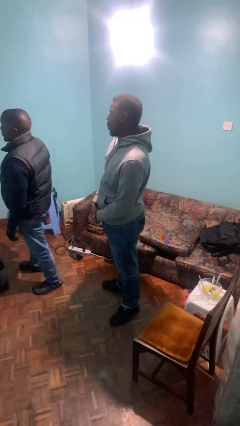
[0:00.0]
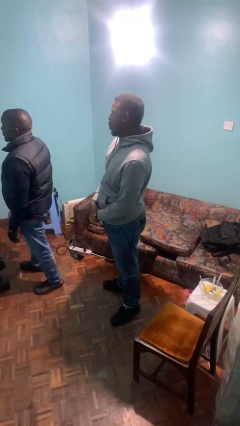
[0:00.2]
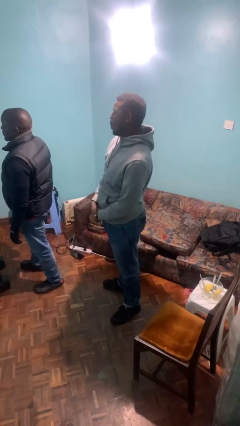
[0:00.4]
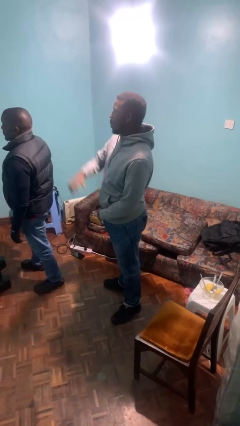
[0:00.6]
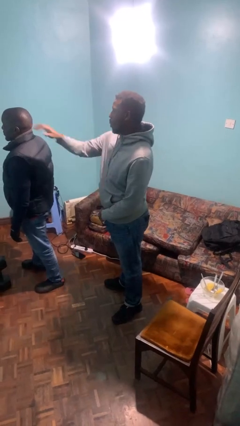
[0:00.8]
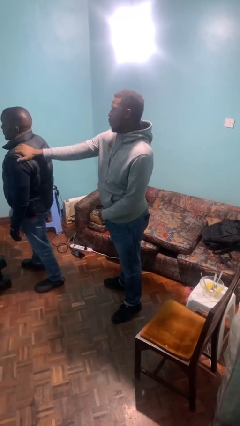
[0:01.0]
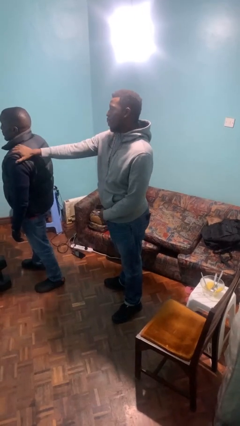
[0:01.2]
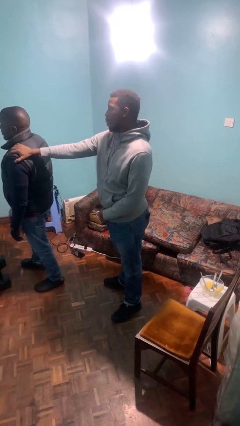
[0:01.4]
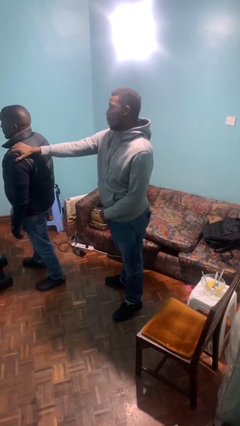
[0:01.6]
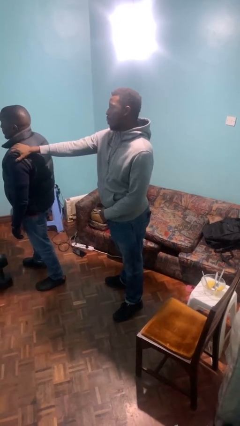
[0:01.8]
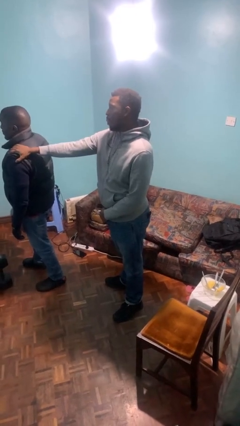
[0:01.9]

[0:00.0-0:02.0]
person grabs person by shoulder

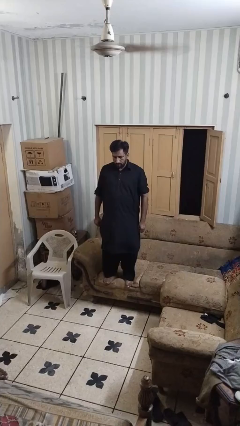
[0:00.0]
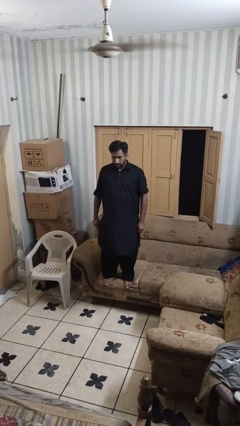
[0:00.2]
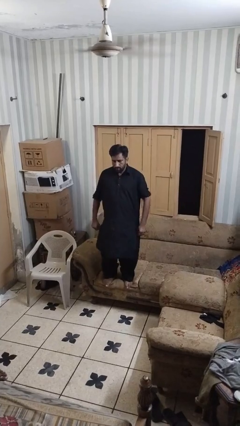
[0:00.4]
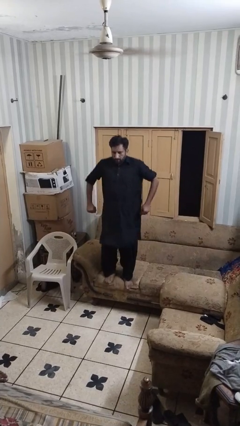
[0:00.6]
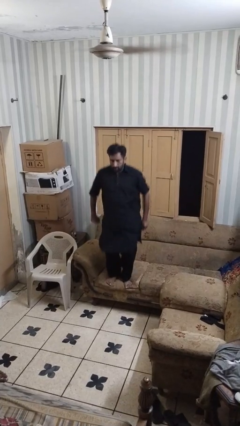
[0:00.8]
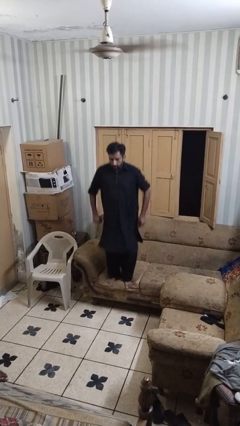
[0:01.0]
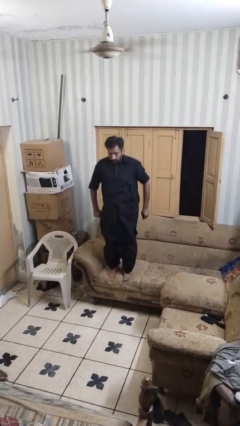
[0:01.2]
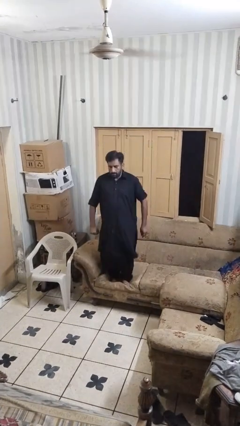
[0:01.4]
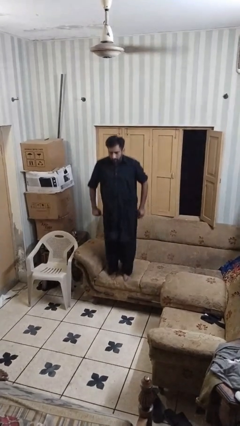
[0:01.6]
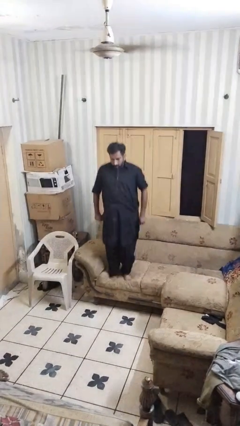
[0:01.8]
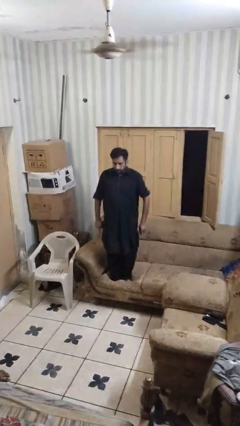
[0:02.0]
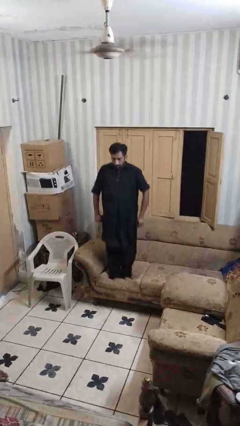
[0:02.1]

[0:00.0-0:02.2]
person jumps on couch

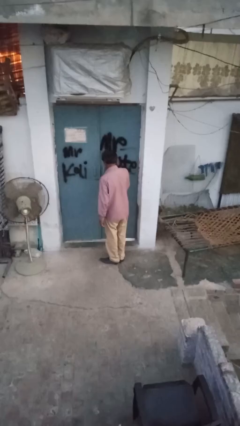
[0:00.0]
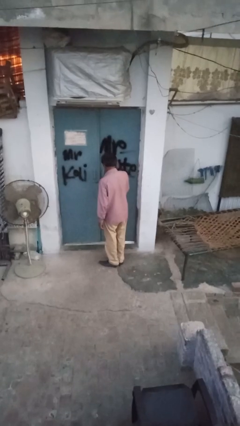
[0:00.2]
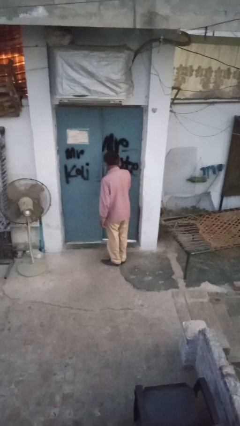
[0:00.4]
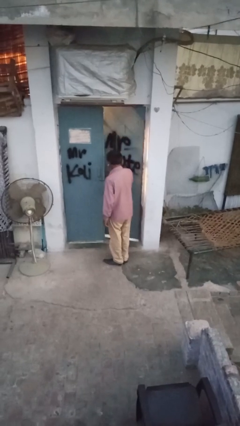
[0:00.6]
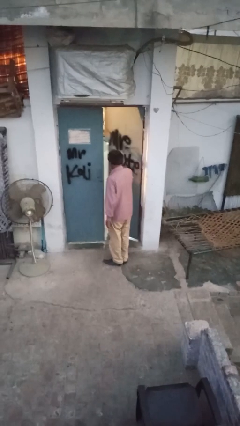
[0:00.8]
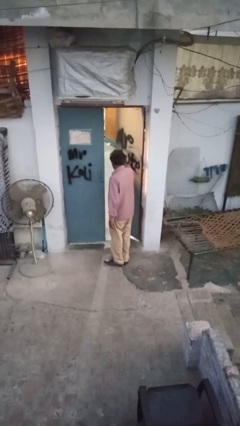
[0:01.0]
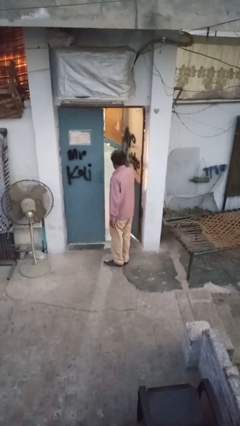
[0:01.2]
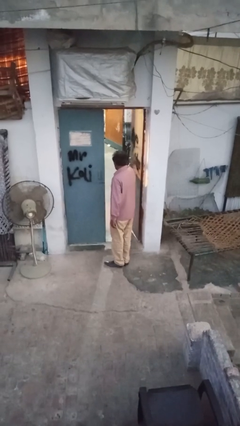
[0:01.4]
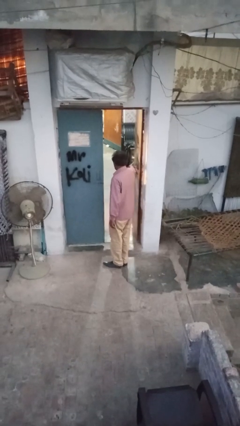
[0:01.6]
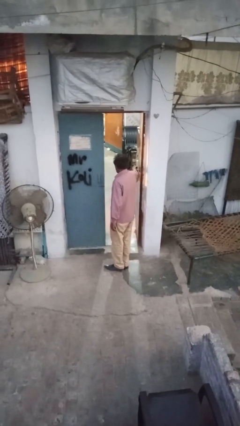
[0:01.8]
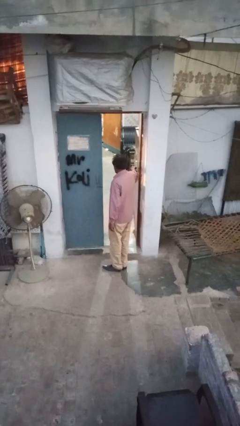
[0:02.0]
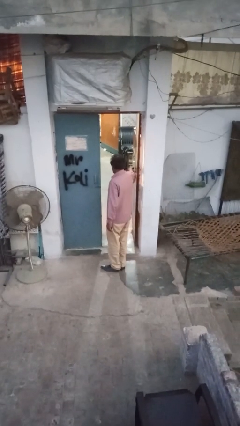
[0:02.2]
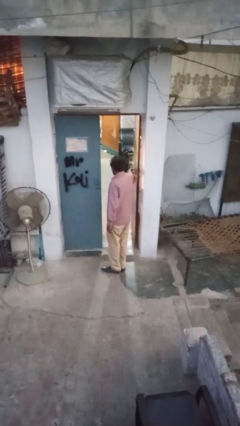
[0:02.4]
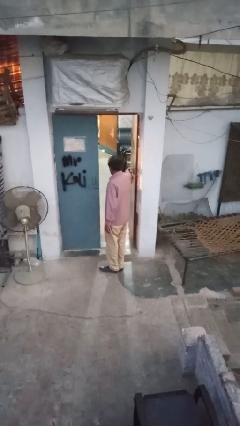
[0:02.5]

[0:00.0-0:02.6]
person opens facility door

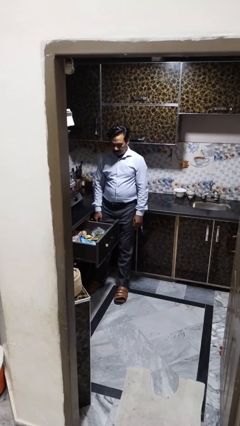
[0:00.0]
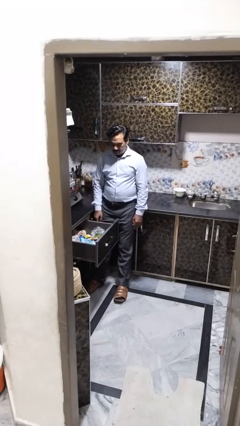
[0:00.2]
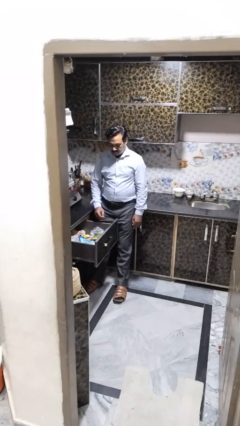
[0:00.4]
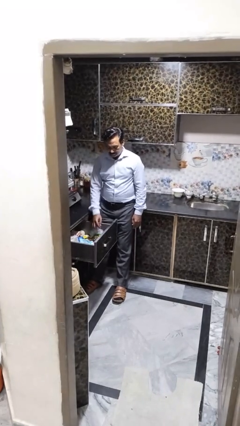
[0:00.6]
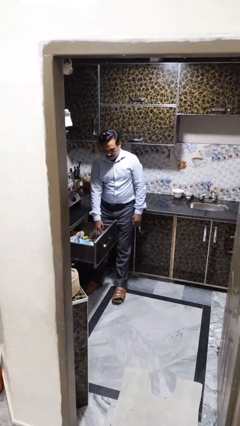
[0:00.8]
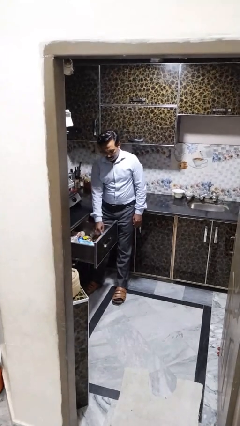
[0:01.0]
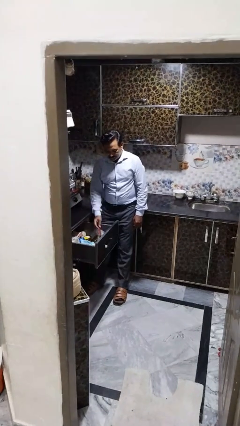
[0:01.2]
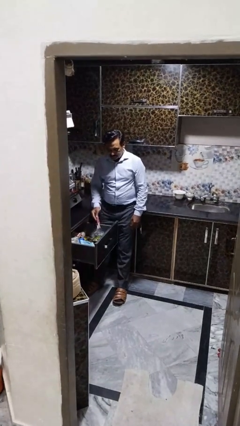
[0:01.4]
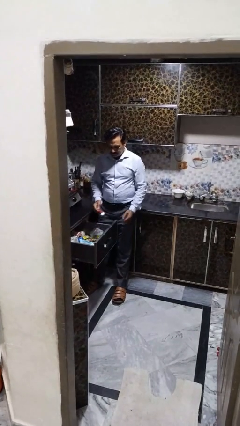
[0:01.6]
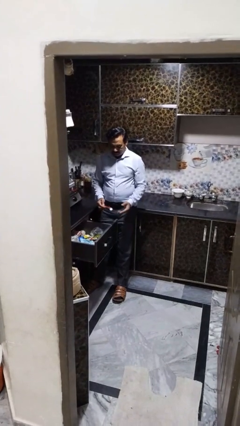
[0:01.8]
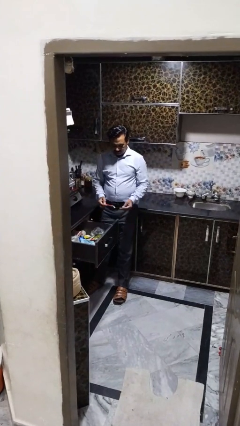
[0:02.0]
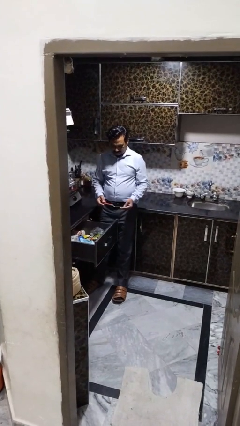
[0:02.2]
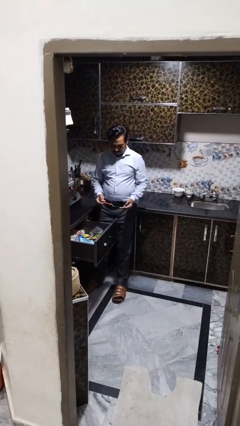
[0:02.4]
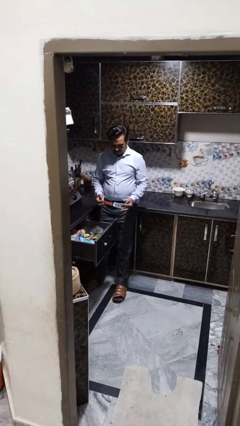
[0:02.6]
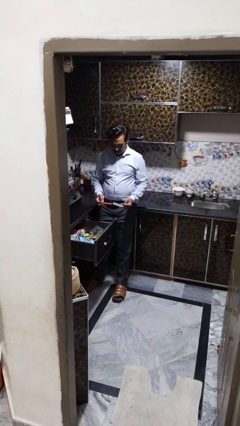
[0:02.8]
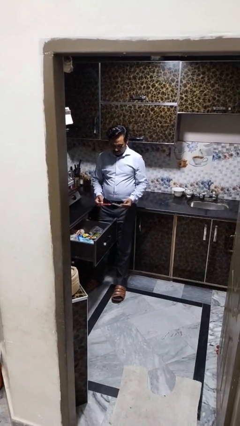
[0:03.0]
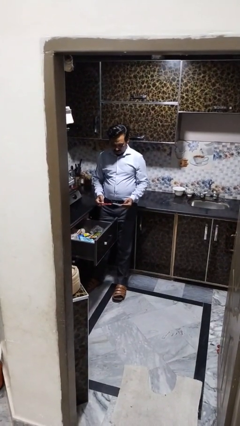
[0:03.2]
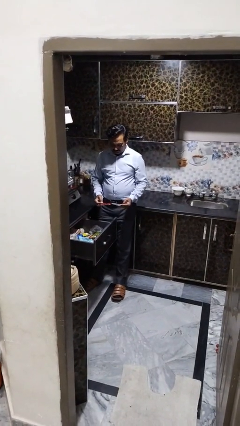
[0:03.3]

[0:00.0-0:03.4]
person takes object from kitchen drawer

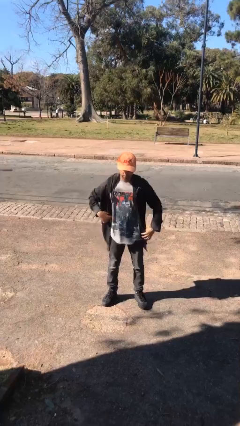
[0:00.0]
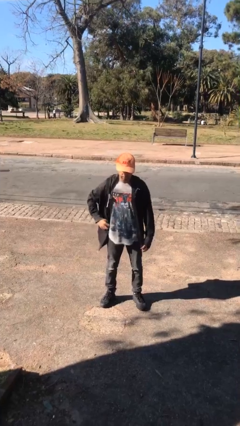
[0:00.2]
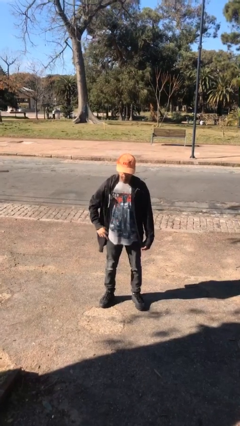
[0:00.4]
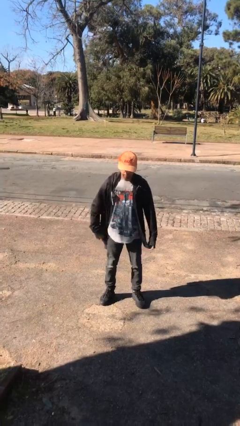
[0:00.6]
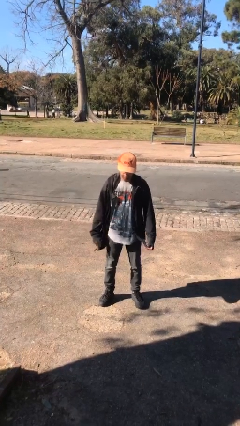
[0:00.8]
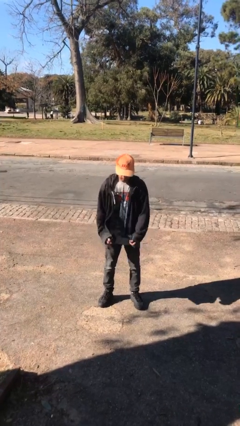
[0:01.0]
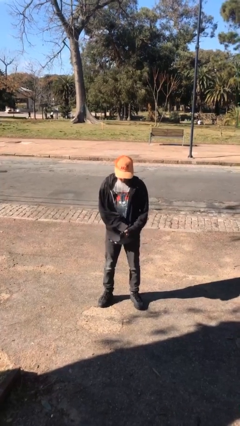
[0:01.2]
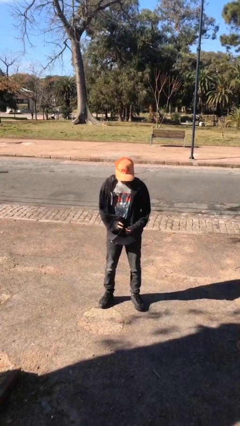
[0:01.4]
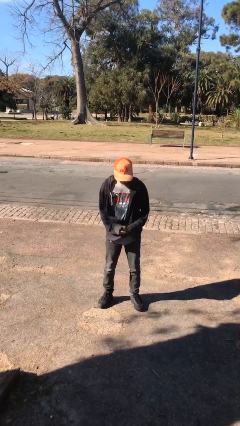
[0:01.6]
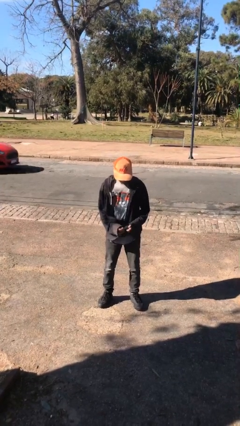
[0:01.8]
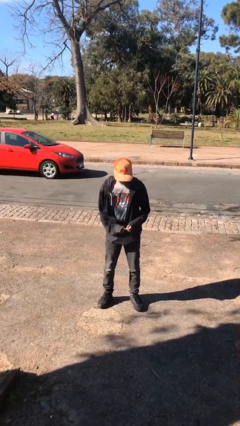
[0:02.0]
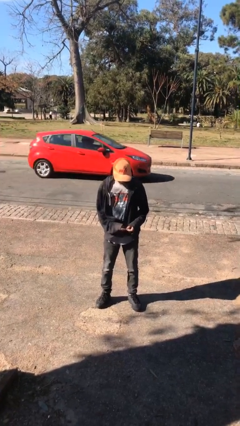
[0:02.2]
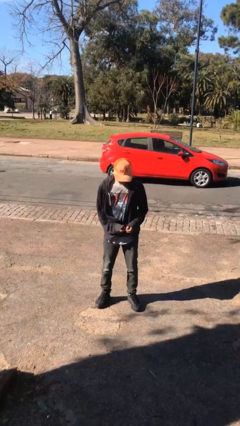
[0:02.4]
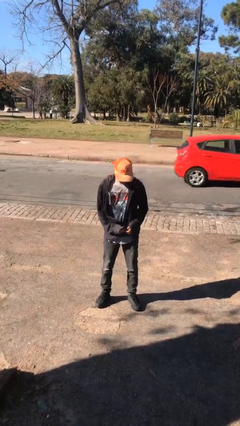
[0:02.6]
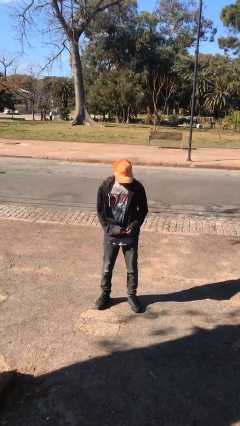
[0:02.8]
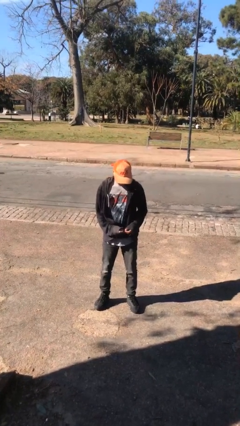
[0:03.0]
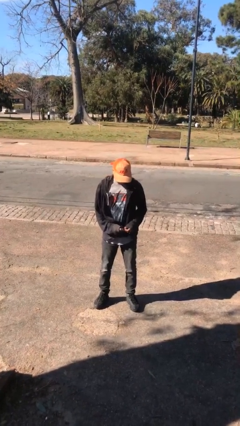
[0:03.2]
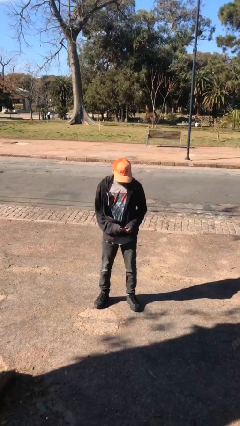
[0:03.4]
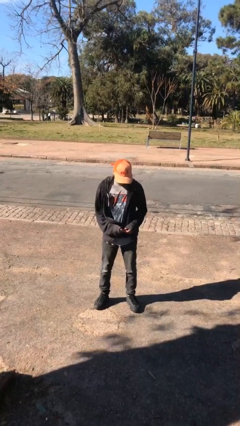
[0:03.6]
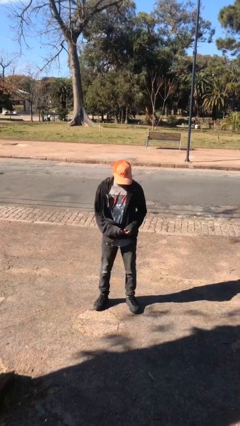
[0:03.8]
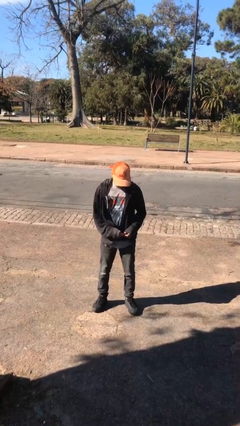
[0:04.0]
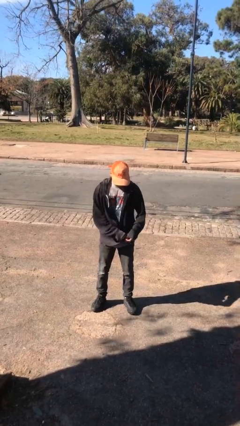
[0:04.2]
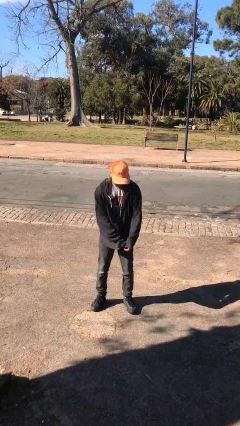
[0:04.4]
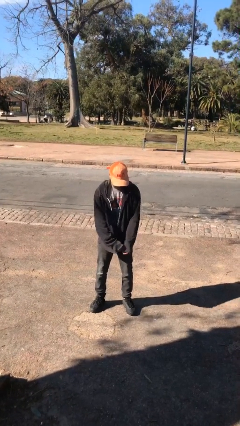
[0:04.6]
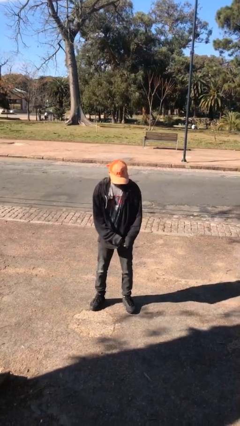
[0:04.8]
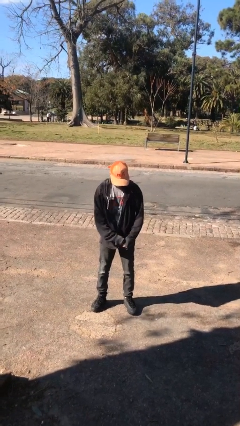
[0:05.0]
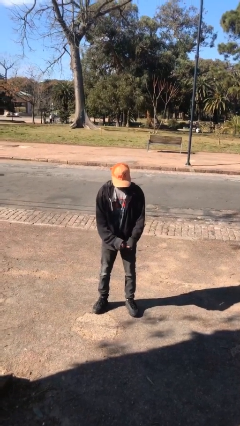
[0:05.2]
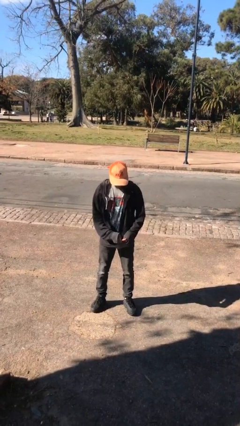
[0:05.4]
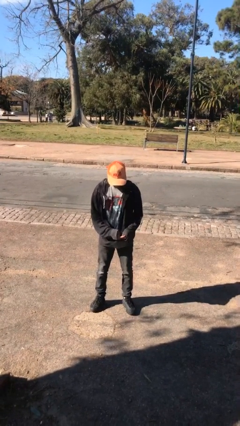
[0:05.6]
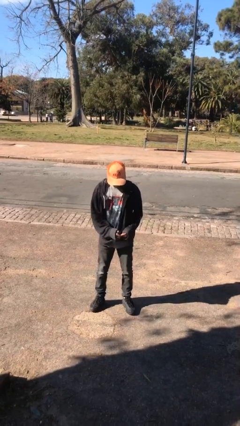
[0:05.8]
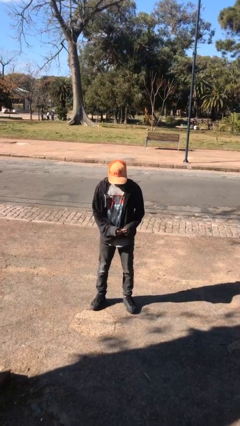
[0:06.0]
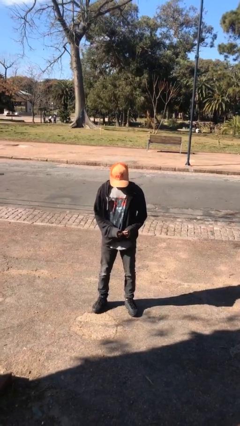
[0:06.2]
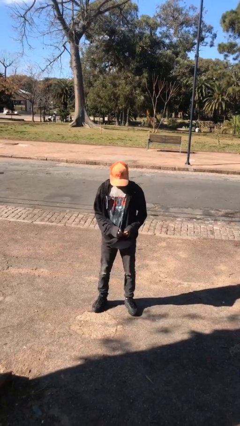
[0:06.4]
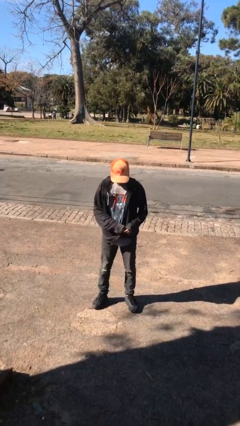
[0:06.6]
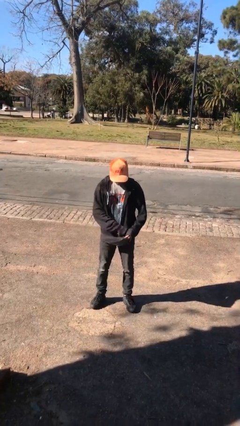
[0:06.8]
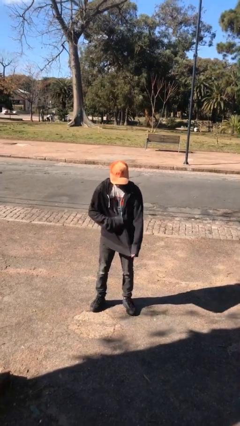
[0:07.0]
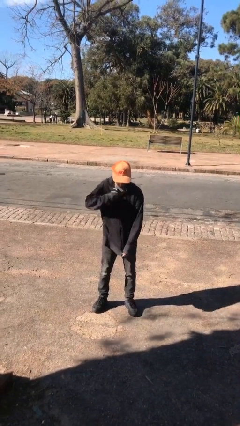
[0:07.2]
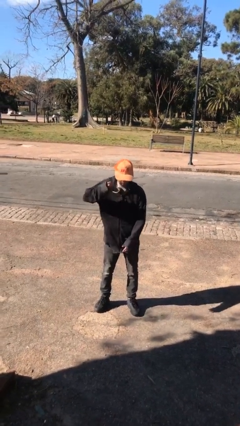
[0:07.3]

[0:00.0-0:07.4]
person zips up jacket

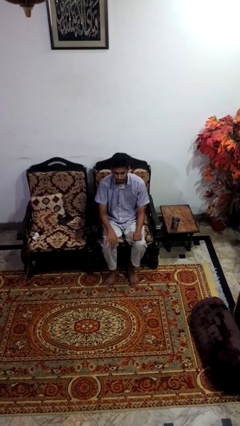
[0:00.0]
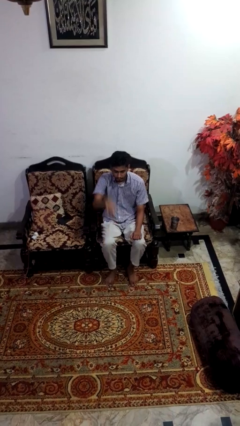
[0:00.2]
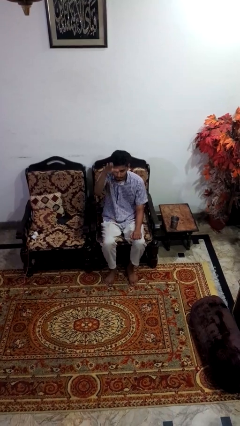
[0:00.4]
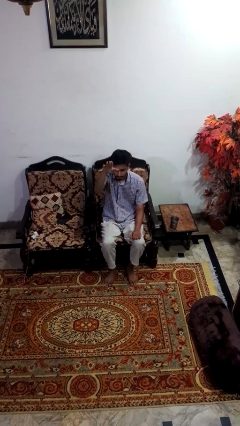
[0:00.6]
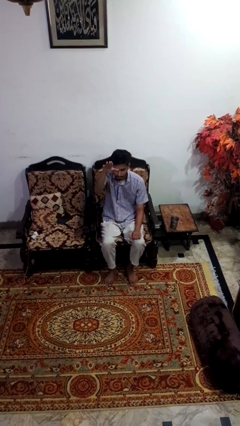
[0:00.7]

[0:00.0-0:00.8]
person gestures swipe up
